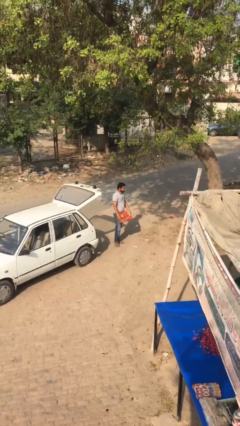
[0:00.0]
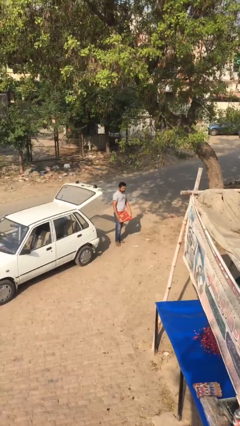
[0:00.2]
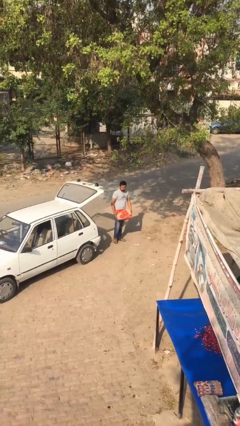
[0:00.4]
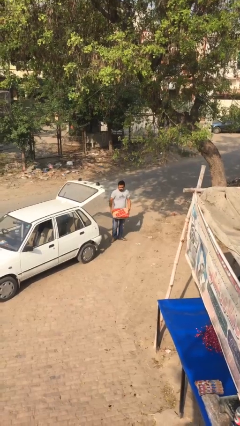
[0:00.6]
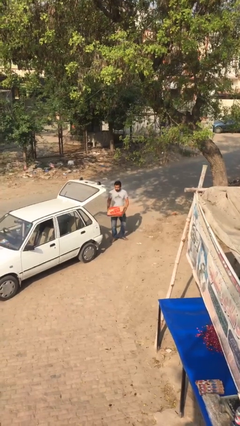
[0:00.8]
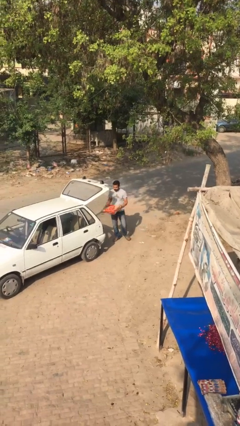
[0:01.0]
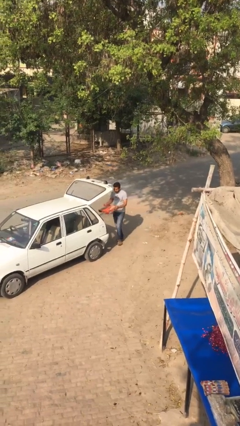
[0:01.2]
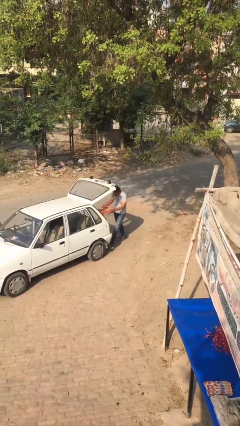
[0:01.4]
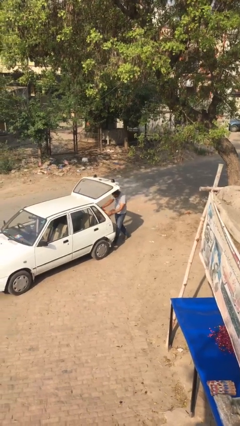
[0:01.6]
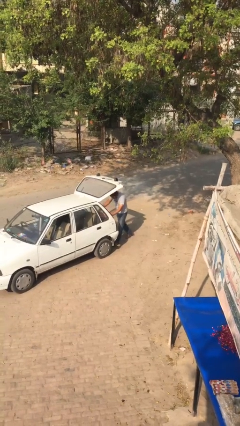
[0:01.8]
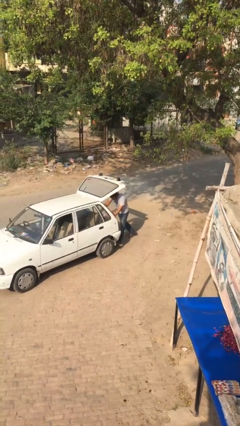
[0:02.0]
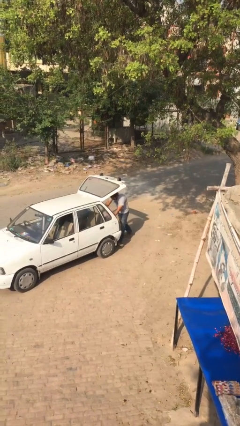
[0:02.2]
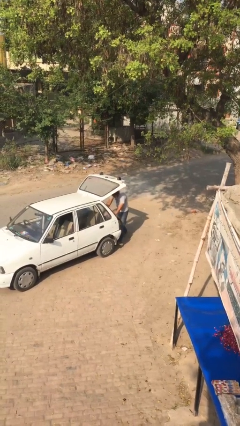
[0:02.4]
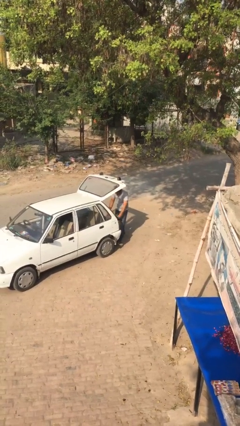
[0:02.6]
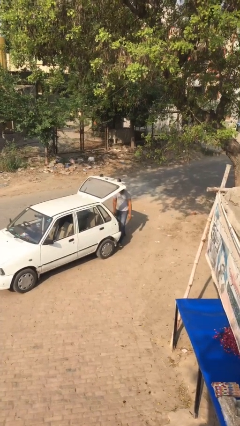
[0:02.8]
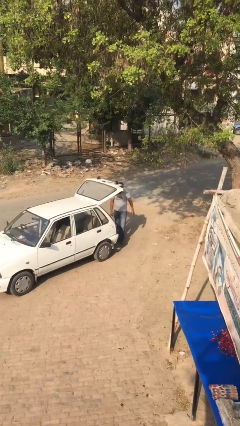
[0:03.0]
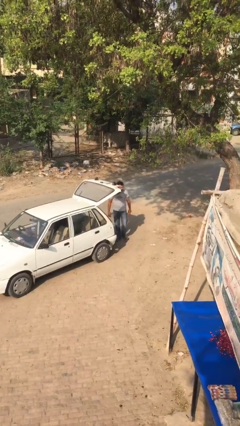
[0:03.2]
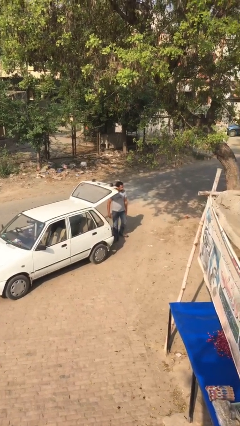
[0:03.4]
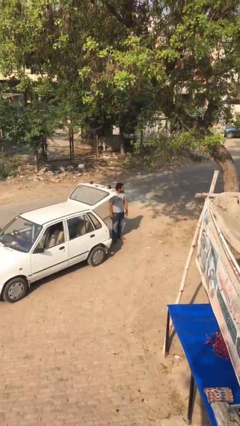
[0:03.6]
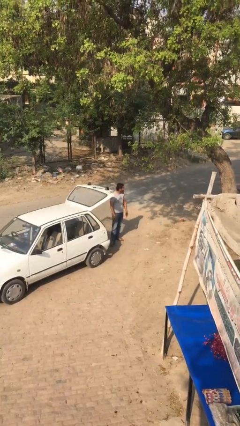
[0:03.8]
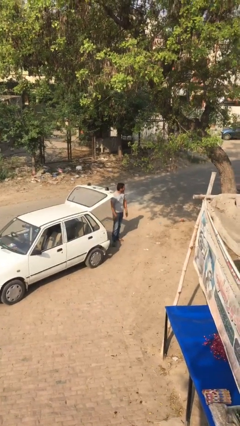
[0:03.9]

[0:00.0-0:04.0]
person loads car

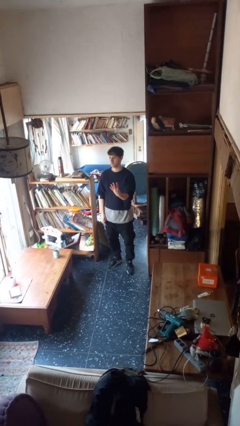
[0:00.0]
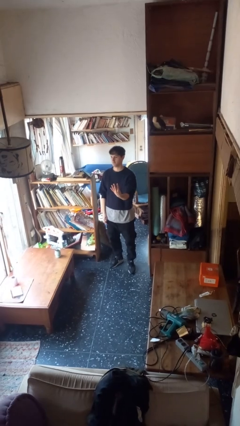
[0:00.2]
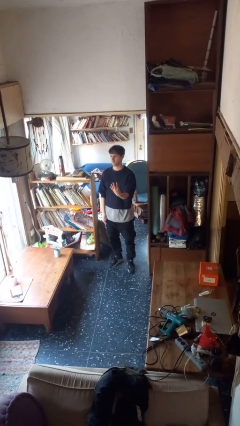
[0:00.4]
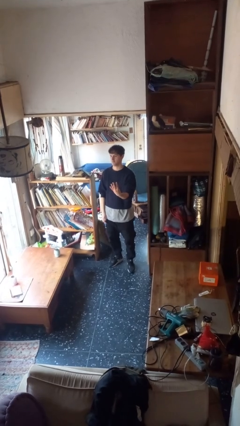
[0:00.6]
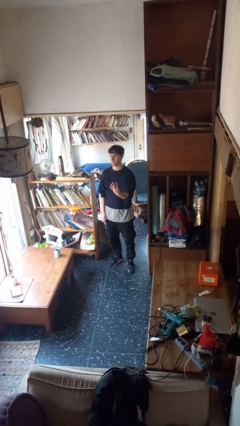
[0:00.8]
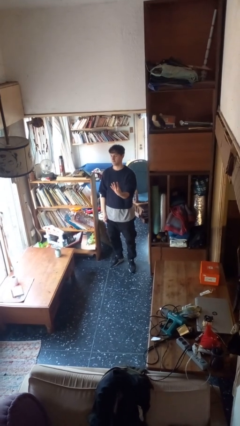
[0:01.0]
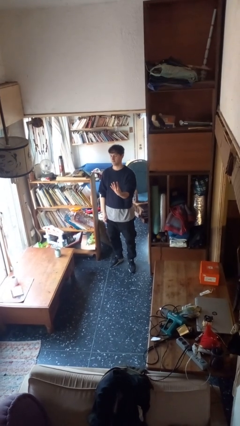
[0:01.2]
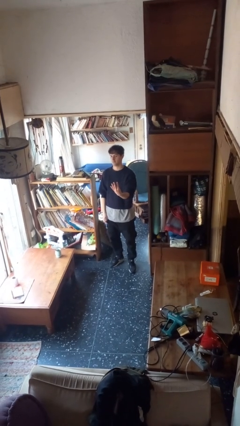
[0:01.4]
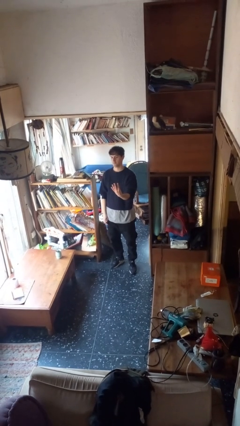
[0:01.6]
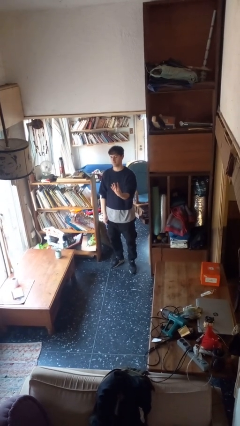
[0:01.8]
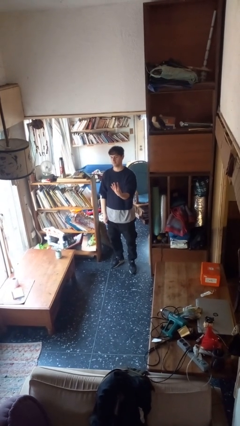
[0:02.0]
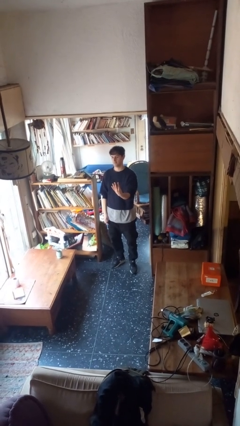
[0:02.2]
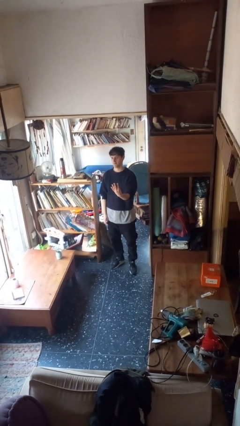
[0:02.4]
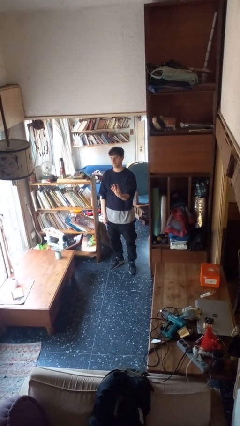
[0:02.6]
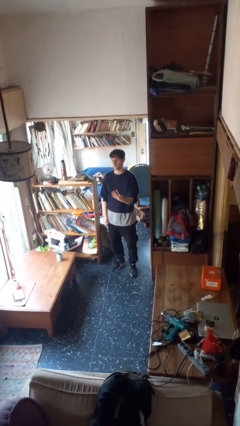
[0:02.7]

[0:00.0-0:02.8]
person gestures number four

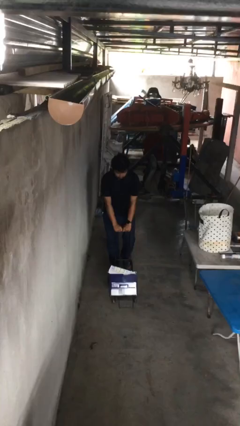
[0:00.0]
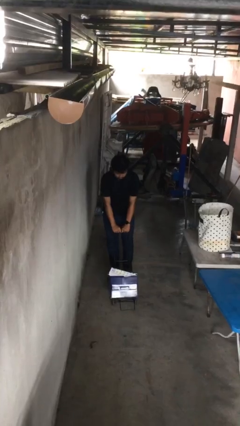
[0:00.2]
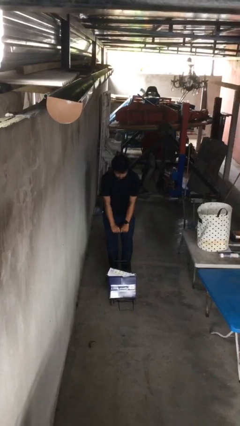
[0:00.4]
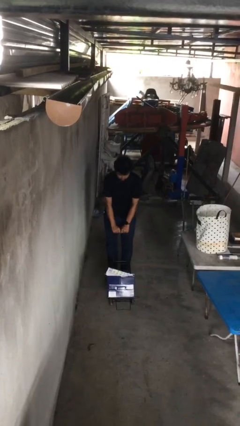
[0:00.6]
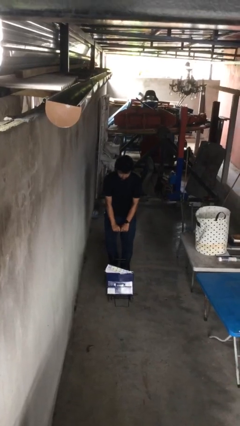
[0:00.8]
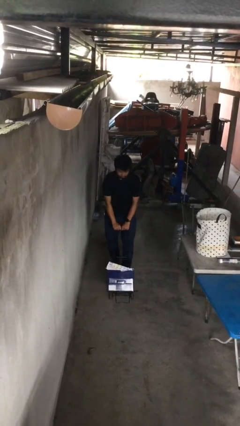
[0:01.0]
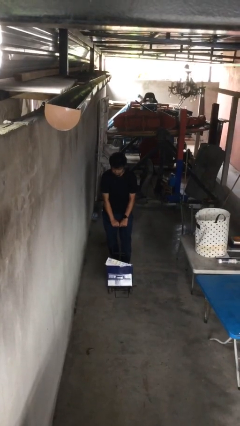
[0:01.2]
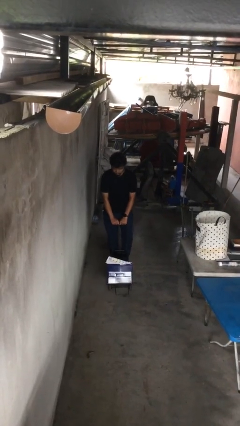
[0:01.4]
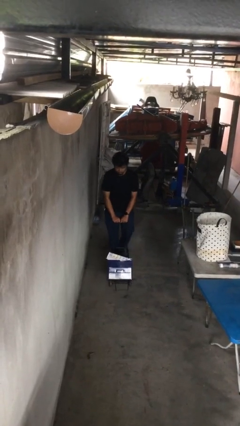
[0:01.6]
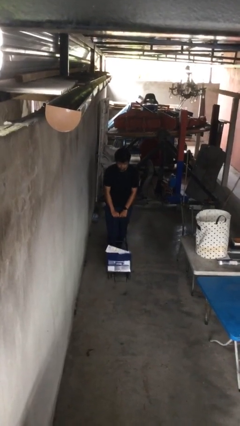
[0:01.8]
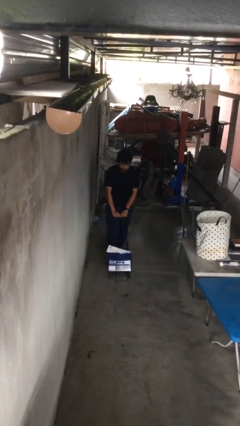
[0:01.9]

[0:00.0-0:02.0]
person pulls wheeled cart

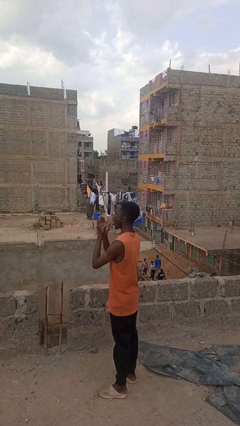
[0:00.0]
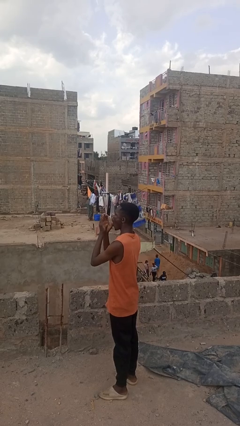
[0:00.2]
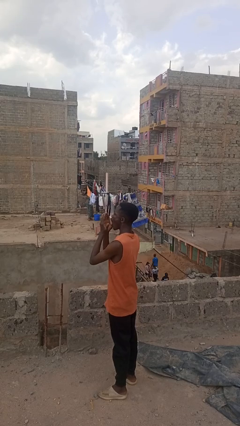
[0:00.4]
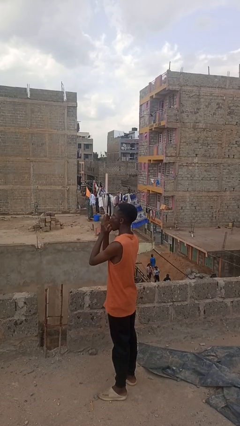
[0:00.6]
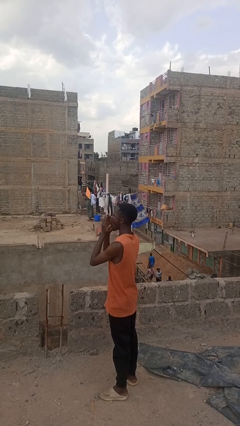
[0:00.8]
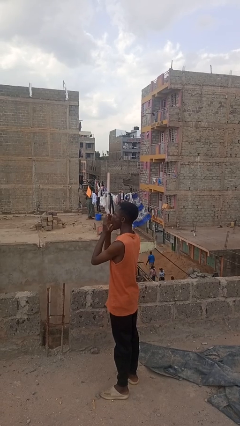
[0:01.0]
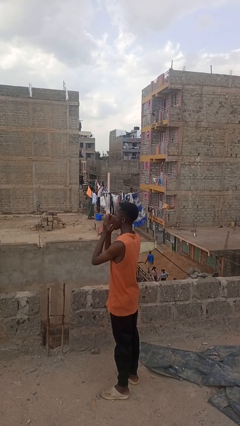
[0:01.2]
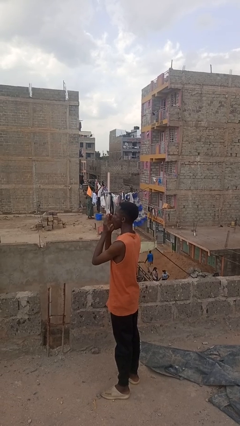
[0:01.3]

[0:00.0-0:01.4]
person blows into hands

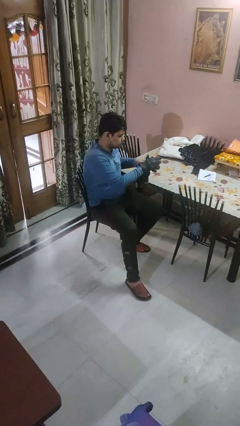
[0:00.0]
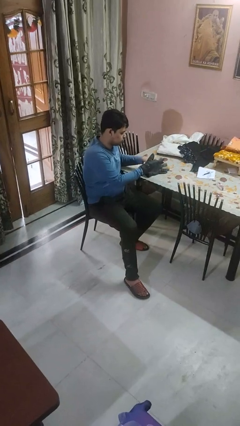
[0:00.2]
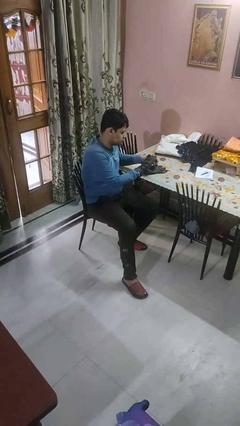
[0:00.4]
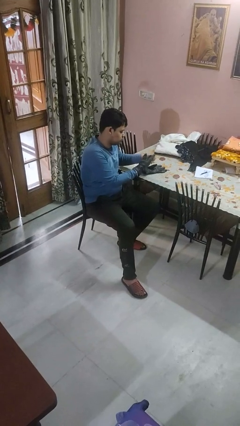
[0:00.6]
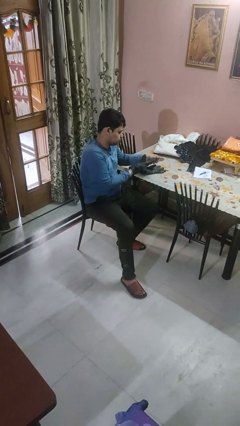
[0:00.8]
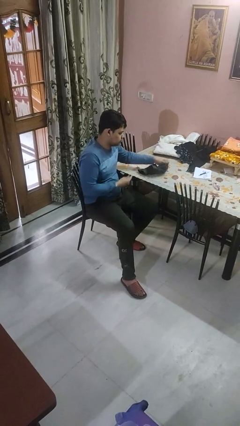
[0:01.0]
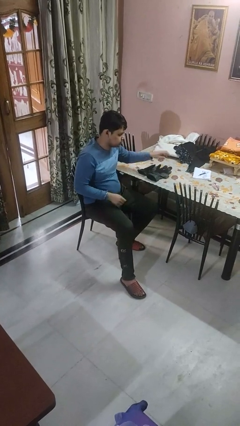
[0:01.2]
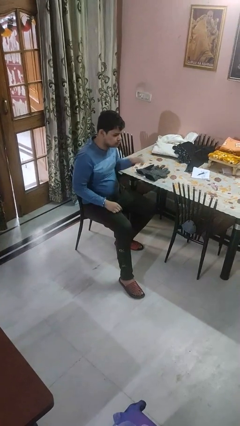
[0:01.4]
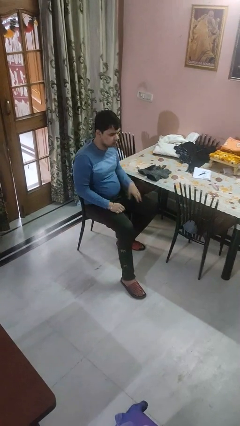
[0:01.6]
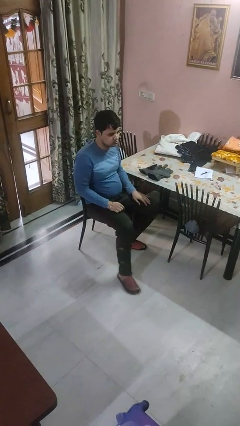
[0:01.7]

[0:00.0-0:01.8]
person takes off gloves

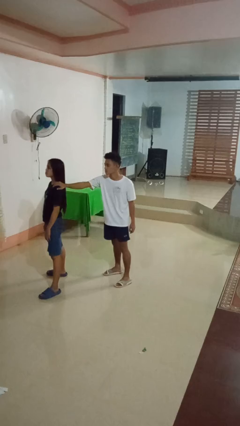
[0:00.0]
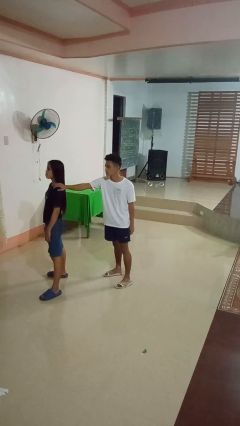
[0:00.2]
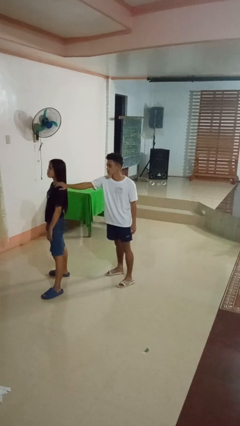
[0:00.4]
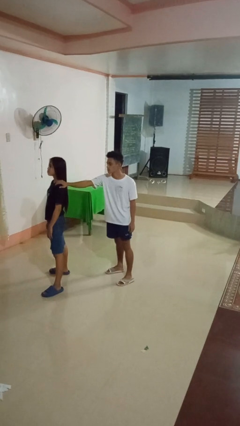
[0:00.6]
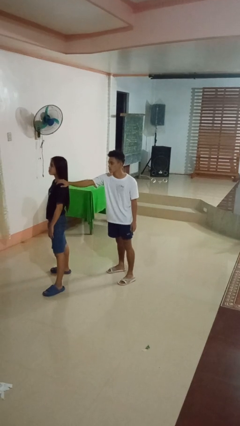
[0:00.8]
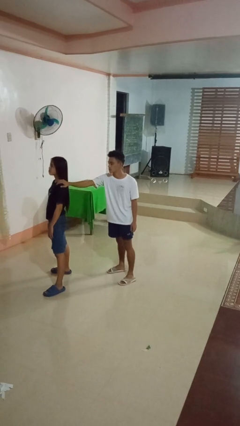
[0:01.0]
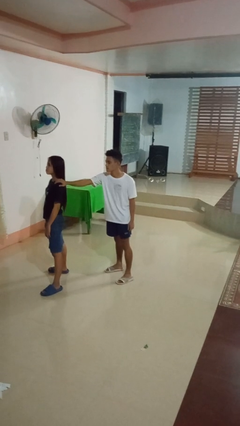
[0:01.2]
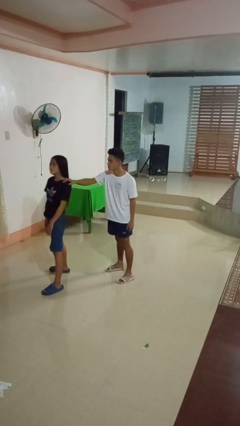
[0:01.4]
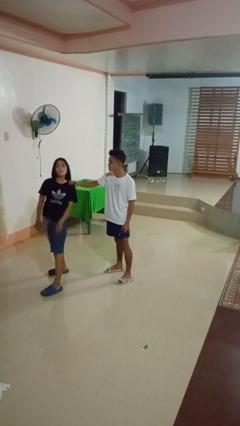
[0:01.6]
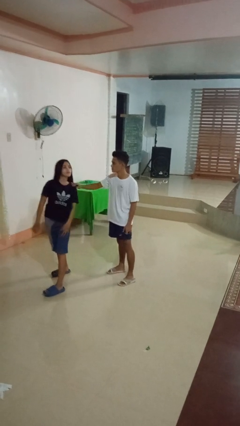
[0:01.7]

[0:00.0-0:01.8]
person grabs person by shoulder

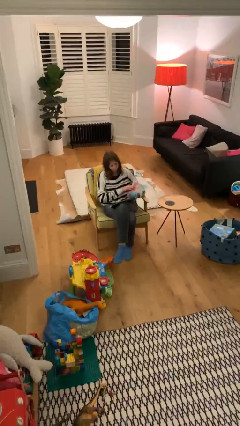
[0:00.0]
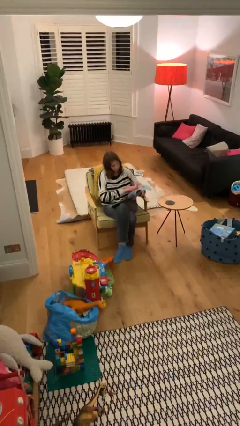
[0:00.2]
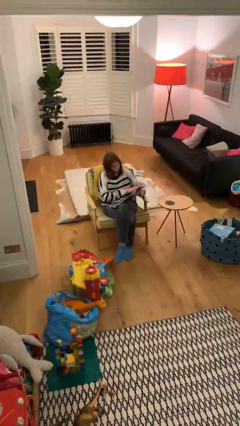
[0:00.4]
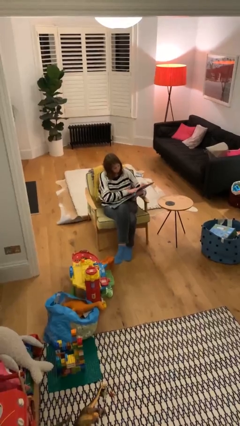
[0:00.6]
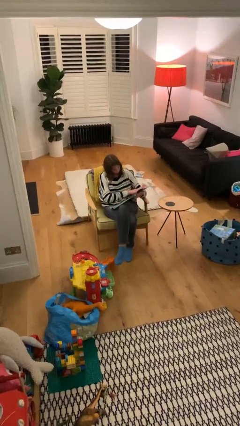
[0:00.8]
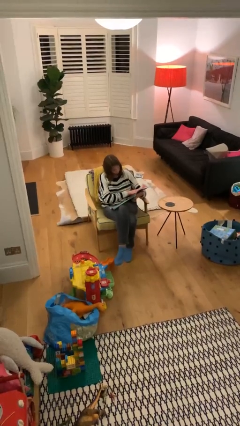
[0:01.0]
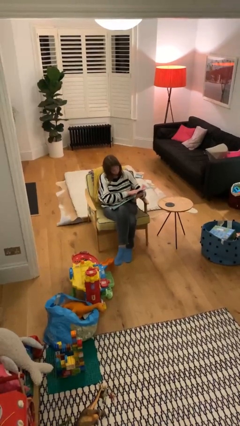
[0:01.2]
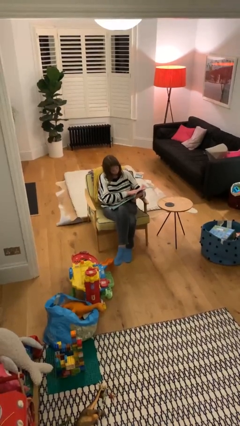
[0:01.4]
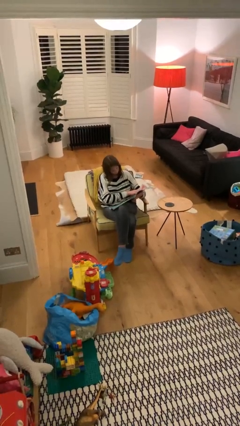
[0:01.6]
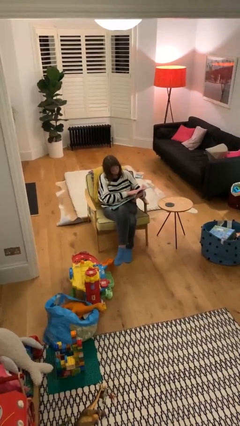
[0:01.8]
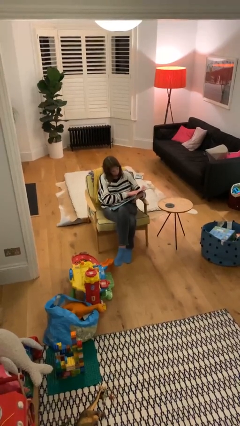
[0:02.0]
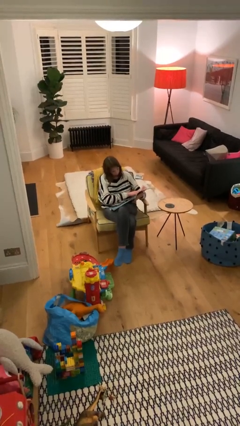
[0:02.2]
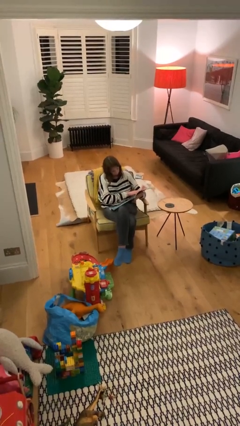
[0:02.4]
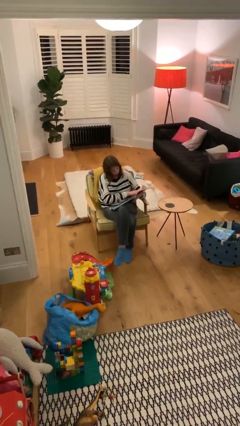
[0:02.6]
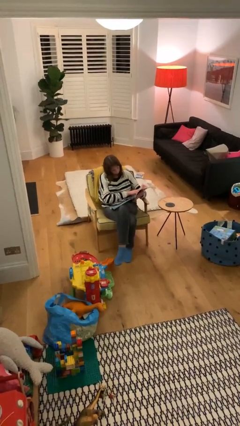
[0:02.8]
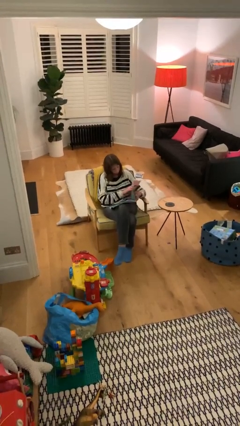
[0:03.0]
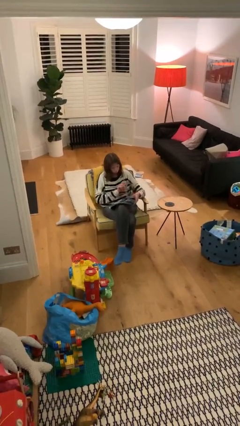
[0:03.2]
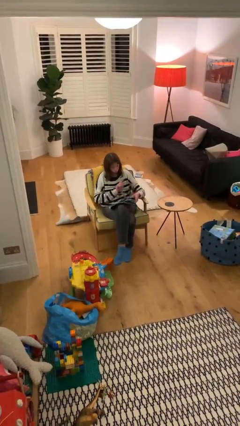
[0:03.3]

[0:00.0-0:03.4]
person reads document
